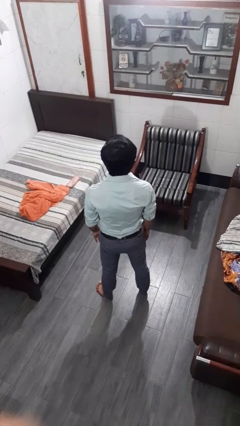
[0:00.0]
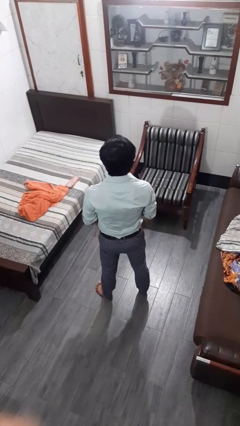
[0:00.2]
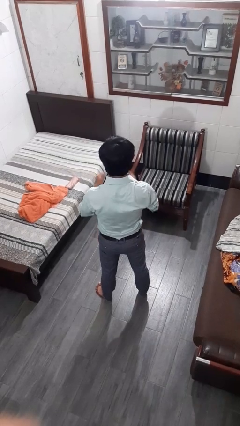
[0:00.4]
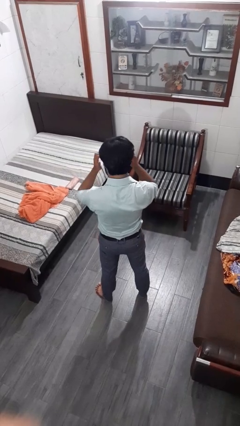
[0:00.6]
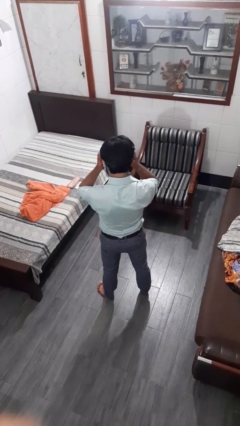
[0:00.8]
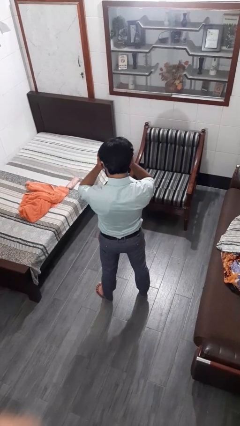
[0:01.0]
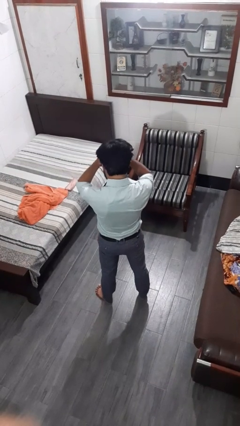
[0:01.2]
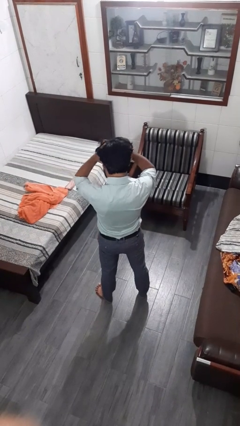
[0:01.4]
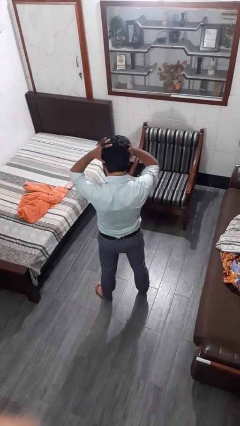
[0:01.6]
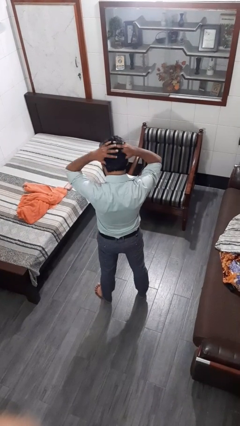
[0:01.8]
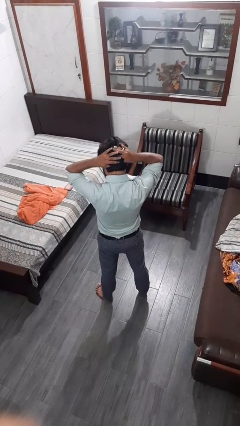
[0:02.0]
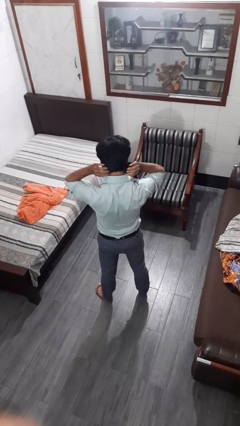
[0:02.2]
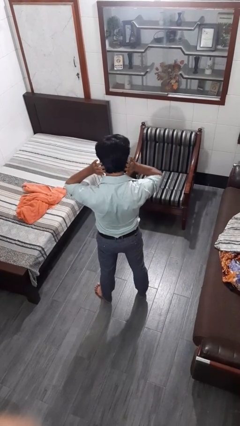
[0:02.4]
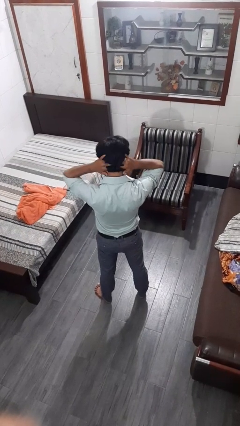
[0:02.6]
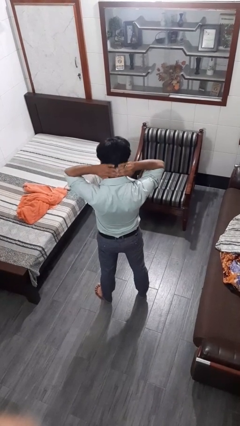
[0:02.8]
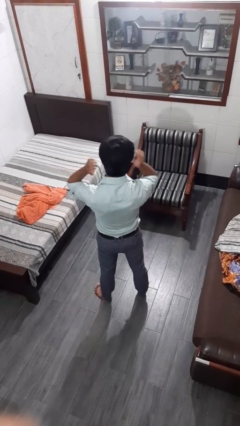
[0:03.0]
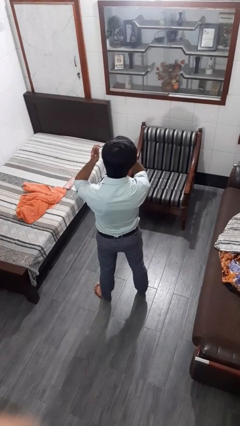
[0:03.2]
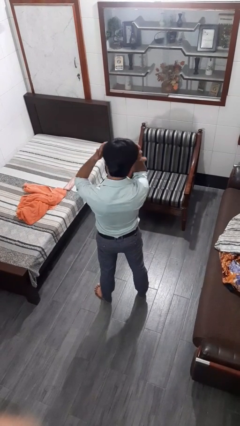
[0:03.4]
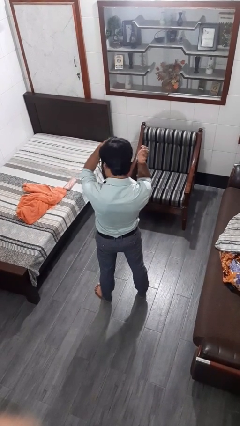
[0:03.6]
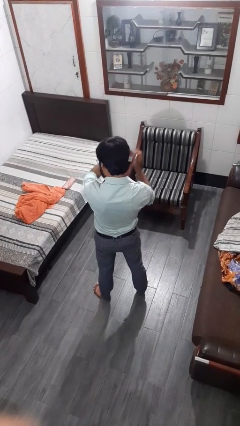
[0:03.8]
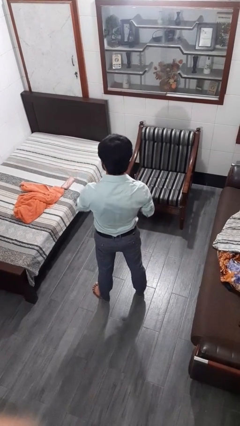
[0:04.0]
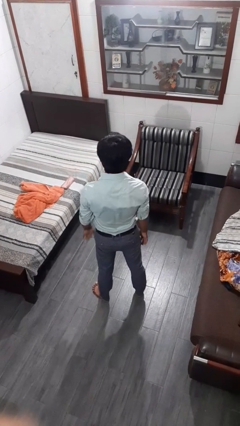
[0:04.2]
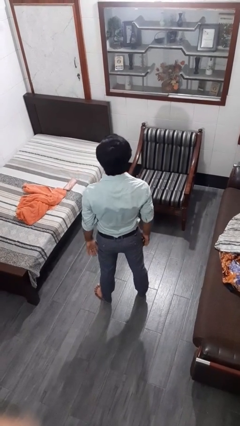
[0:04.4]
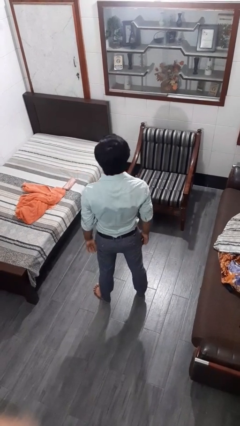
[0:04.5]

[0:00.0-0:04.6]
person strokes hair

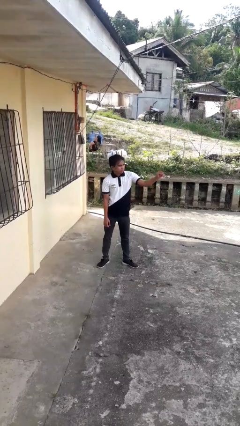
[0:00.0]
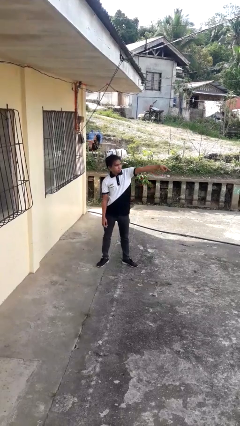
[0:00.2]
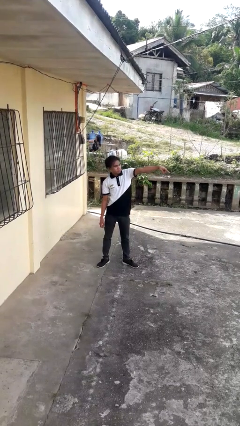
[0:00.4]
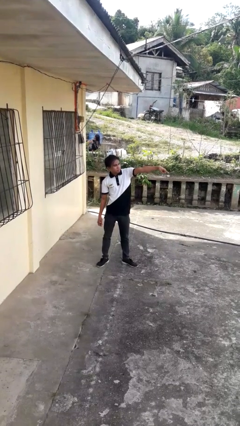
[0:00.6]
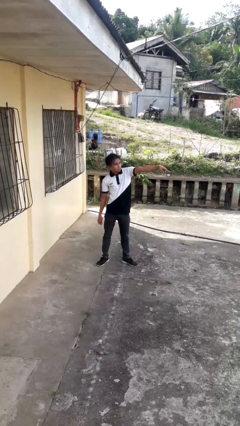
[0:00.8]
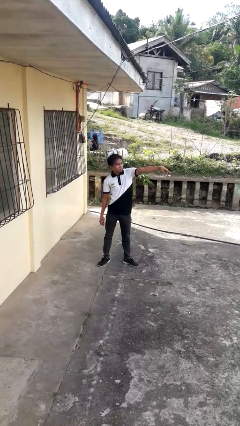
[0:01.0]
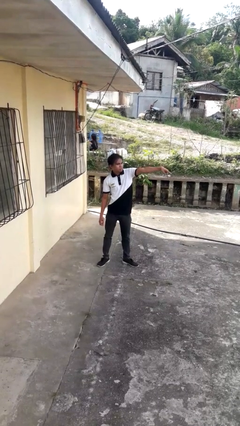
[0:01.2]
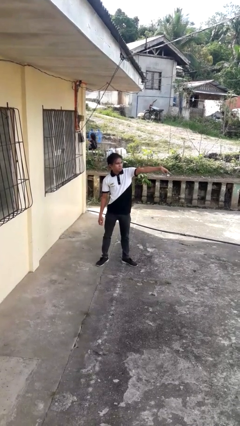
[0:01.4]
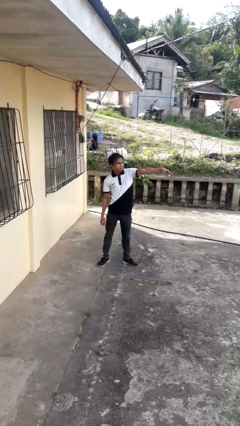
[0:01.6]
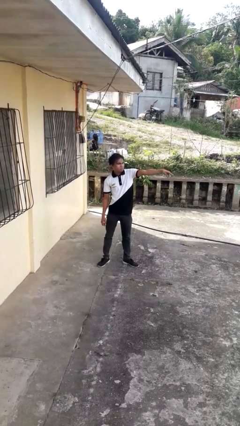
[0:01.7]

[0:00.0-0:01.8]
person points at person

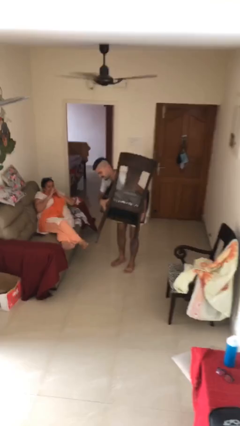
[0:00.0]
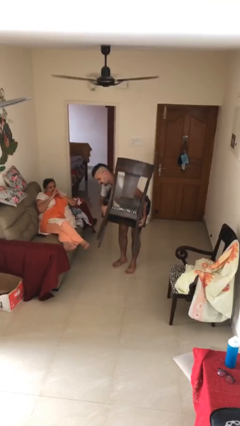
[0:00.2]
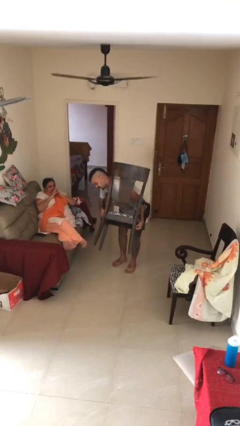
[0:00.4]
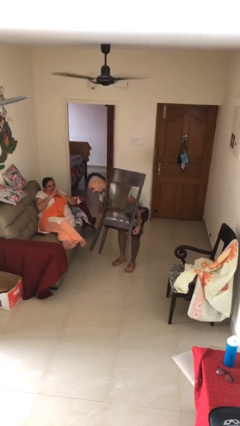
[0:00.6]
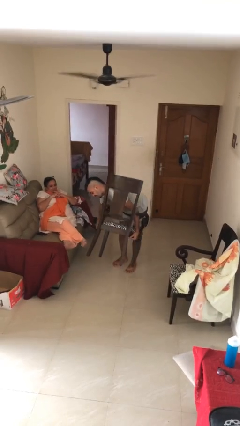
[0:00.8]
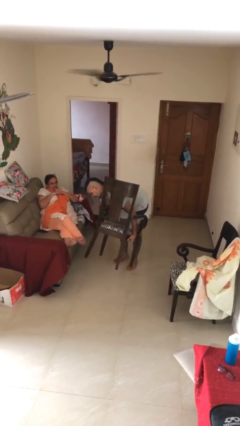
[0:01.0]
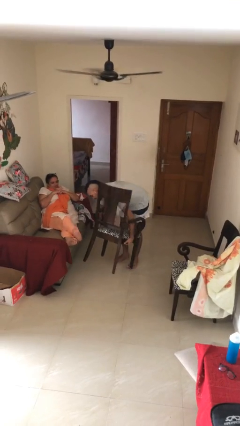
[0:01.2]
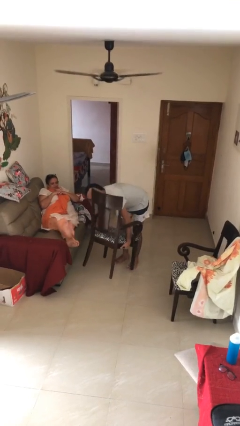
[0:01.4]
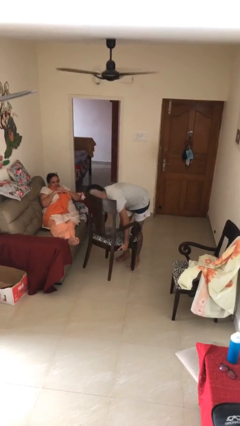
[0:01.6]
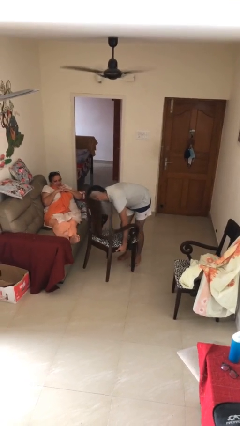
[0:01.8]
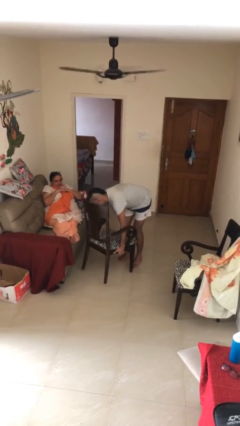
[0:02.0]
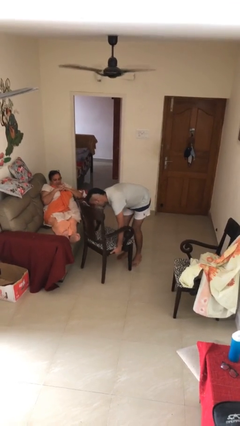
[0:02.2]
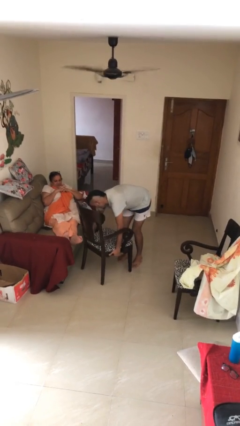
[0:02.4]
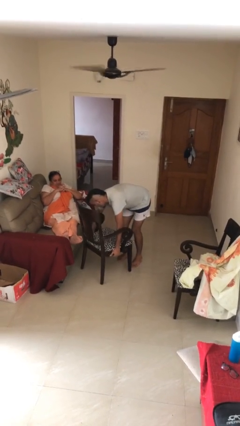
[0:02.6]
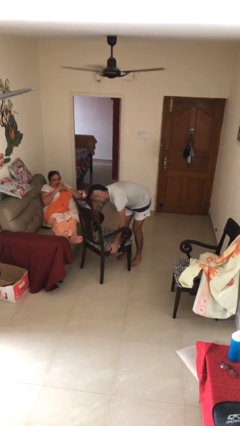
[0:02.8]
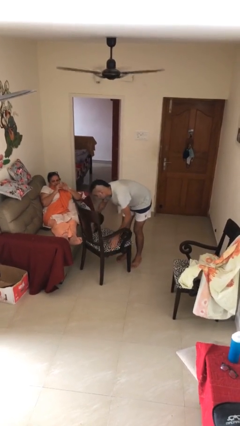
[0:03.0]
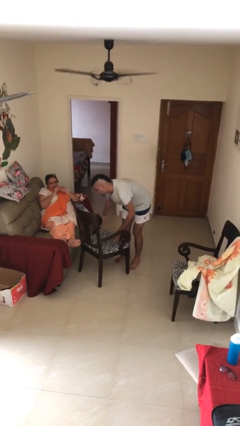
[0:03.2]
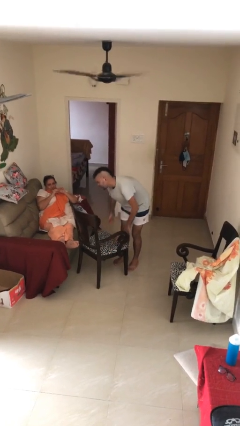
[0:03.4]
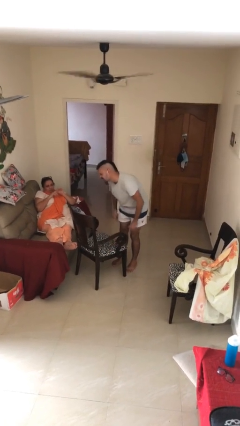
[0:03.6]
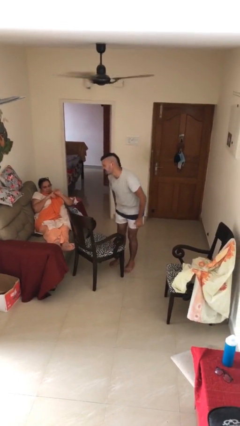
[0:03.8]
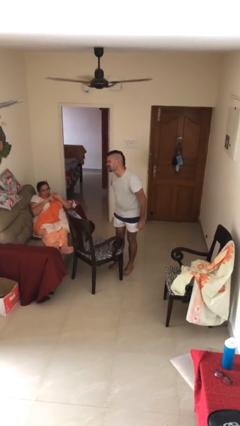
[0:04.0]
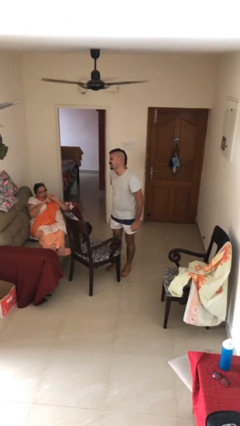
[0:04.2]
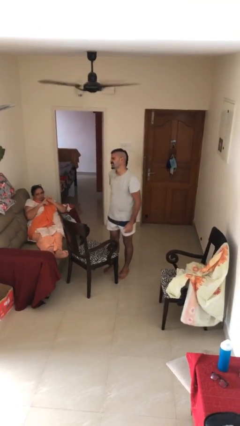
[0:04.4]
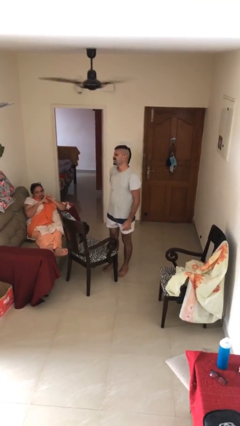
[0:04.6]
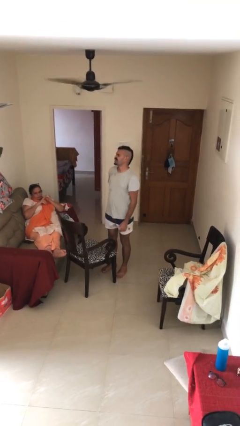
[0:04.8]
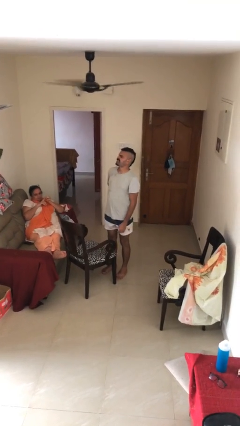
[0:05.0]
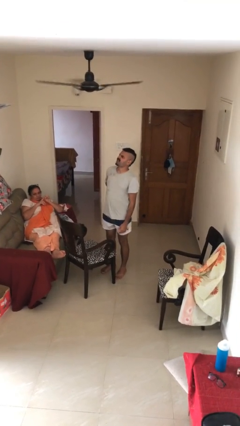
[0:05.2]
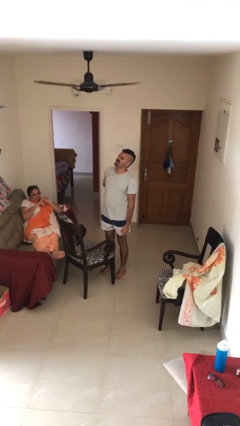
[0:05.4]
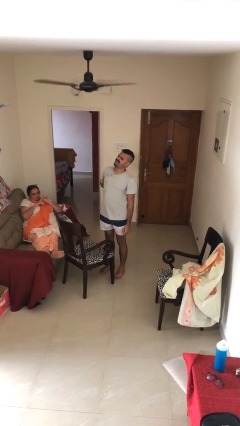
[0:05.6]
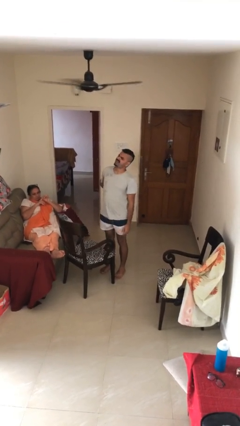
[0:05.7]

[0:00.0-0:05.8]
person puts down object on floor

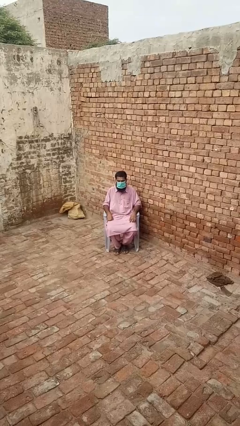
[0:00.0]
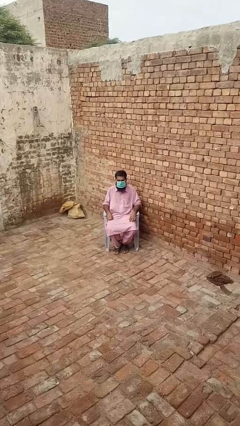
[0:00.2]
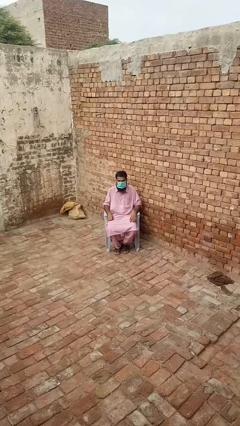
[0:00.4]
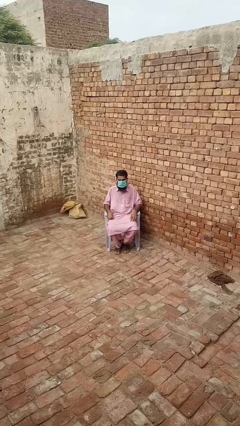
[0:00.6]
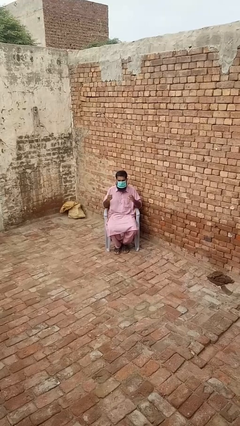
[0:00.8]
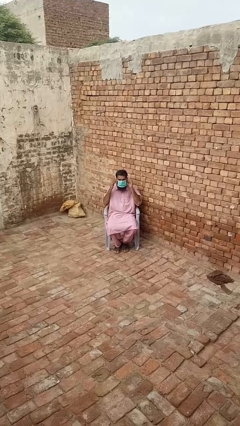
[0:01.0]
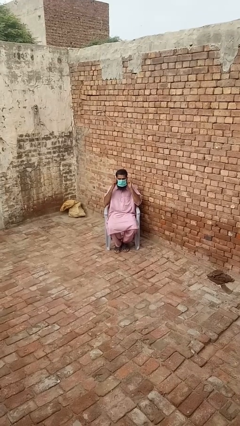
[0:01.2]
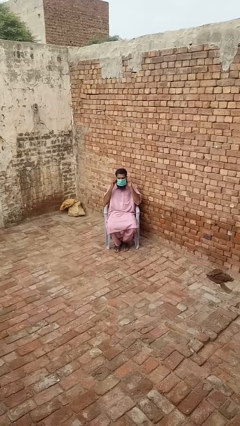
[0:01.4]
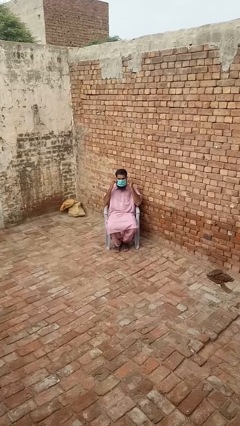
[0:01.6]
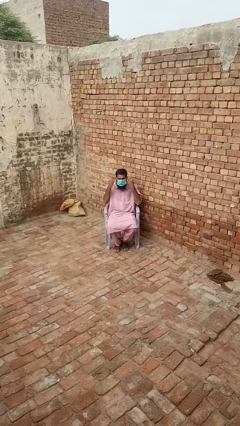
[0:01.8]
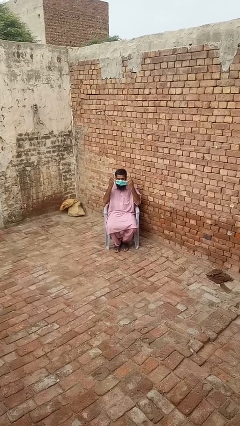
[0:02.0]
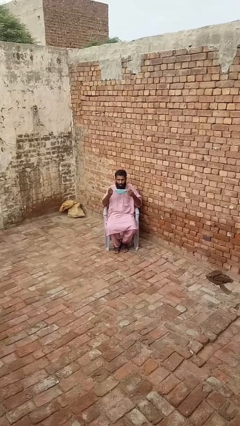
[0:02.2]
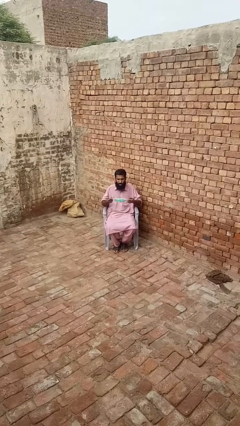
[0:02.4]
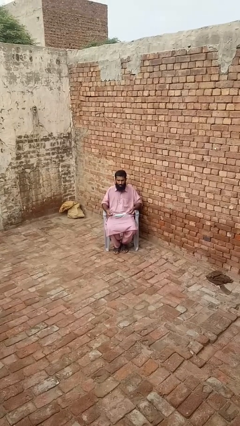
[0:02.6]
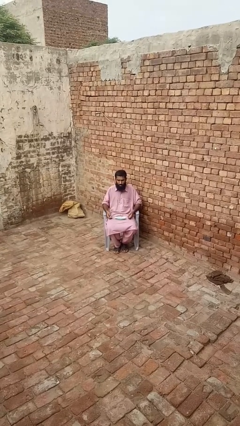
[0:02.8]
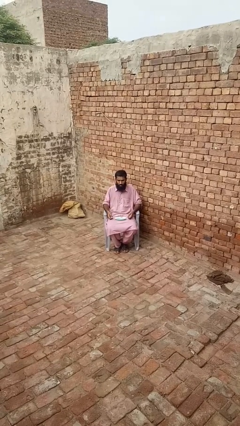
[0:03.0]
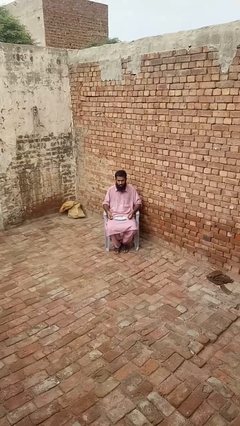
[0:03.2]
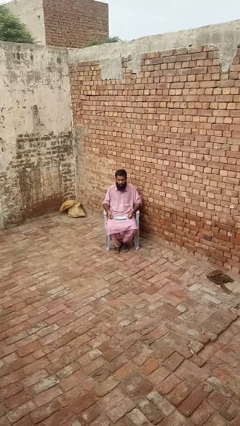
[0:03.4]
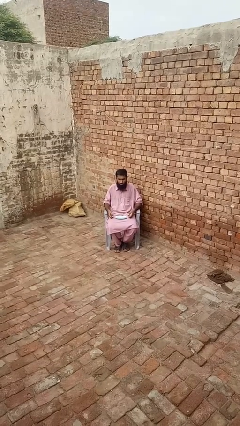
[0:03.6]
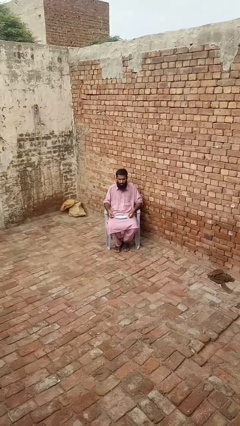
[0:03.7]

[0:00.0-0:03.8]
person takes off facemask

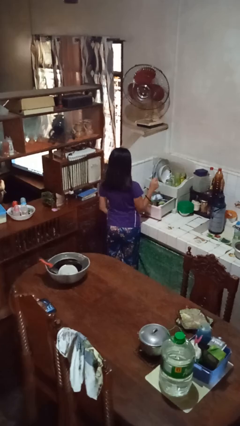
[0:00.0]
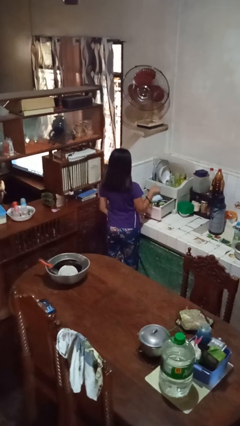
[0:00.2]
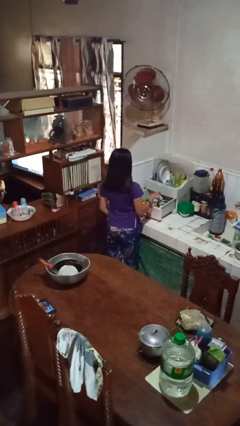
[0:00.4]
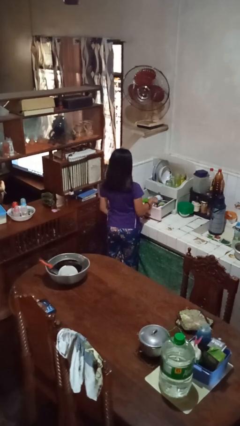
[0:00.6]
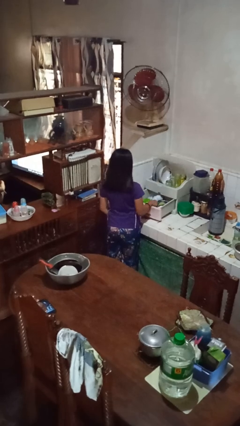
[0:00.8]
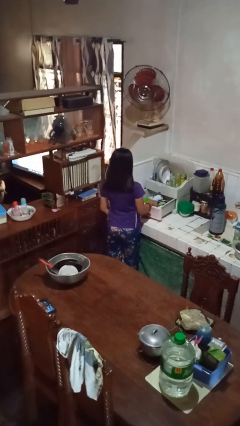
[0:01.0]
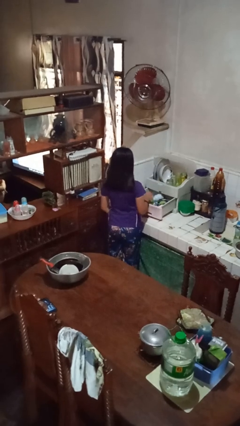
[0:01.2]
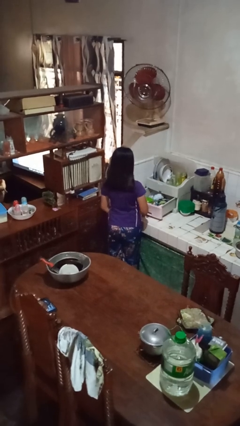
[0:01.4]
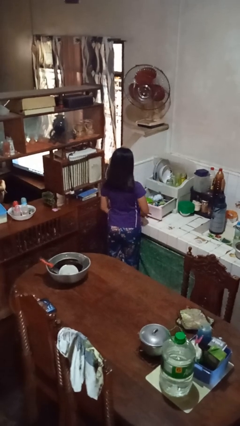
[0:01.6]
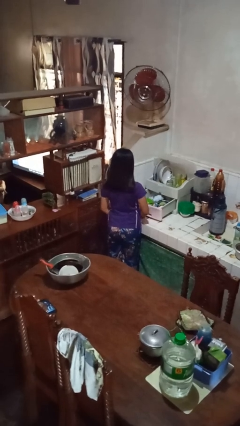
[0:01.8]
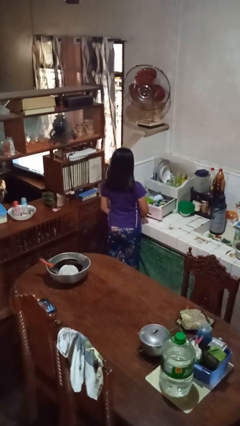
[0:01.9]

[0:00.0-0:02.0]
person puts object into kitchen drawer
